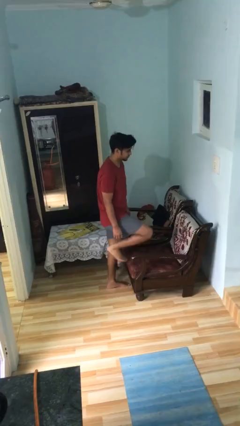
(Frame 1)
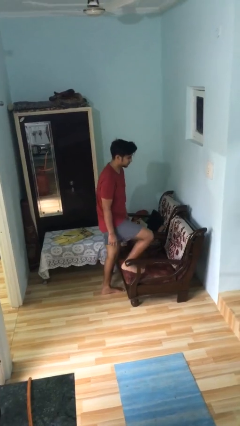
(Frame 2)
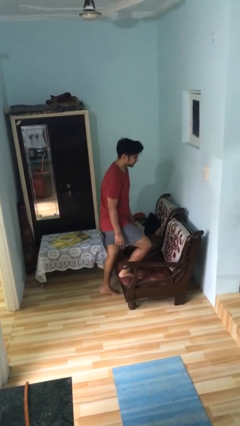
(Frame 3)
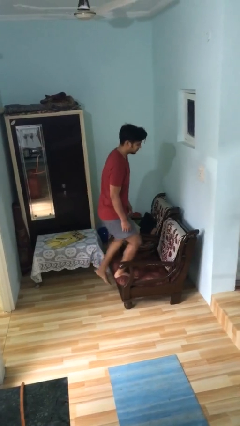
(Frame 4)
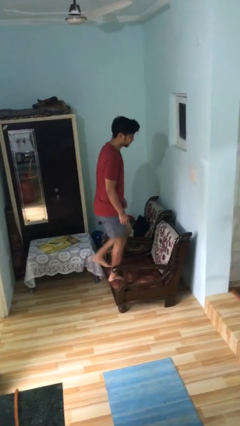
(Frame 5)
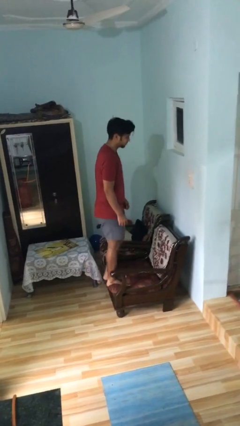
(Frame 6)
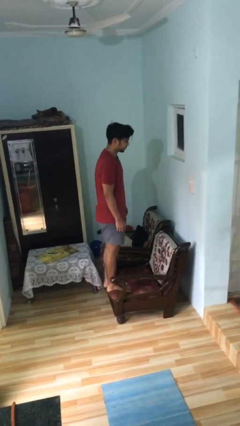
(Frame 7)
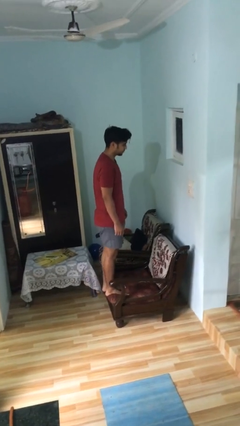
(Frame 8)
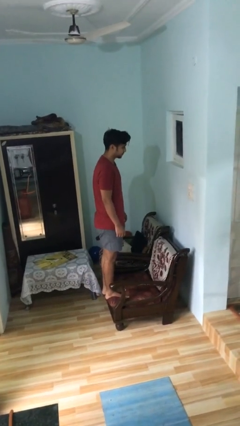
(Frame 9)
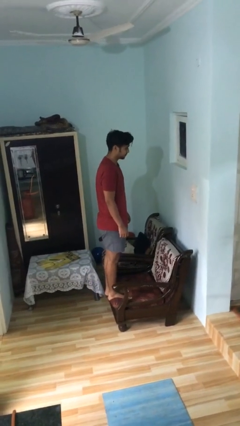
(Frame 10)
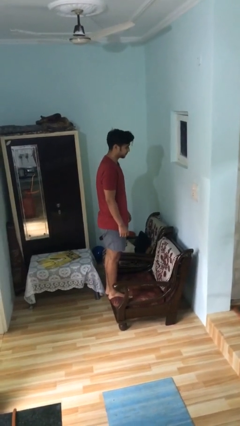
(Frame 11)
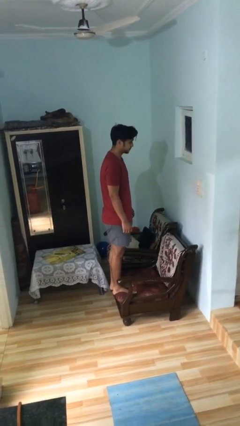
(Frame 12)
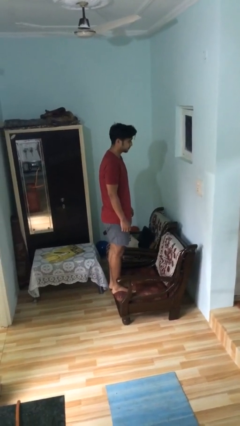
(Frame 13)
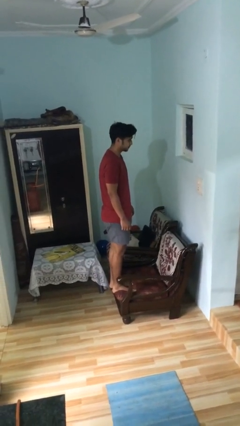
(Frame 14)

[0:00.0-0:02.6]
person climbs on couch

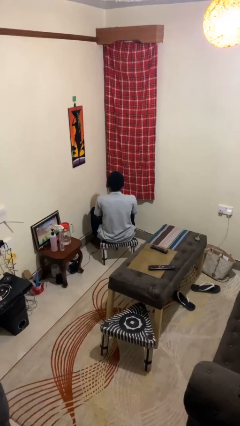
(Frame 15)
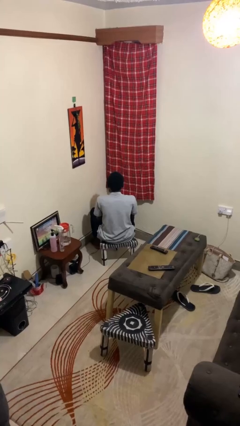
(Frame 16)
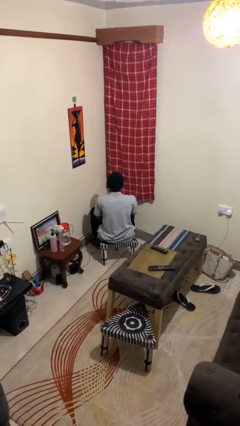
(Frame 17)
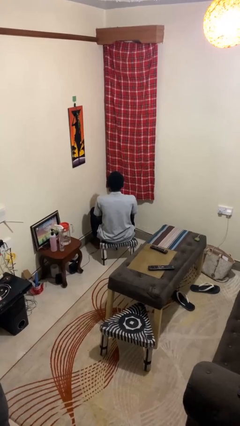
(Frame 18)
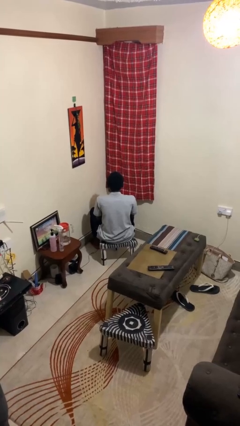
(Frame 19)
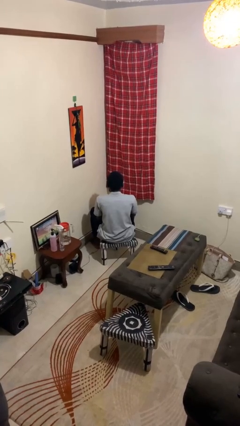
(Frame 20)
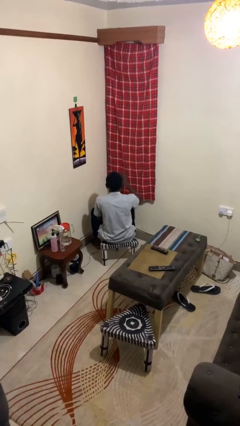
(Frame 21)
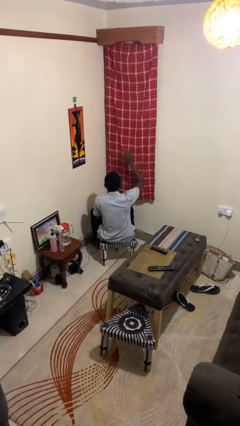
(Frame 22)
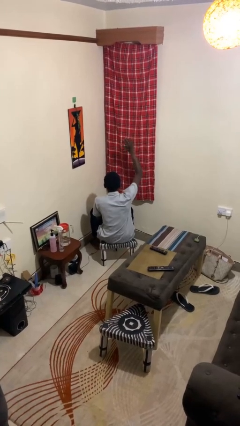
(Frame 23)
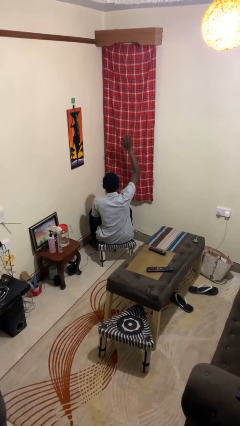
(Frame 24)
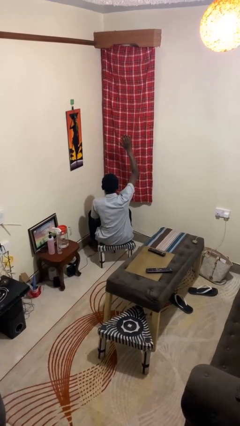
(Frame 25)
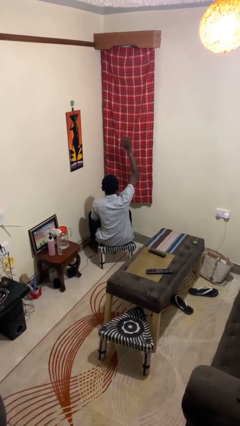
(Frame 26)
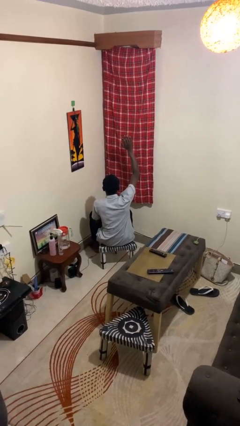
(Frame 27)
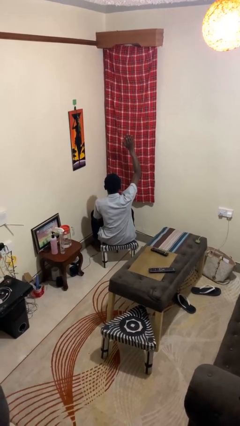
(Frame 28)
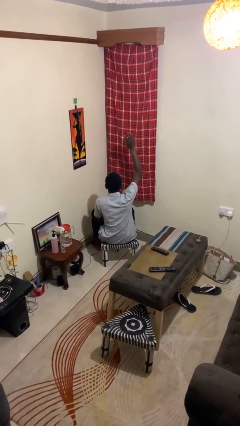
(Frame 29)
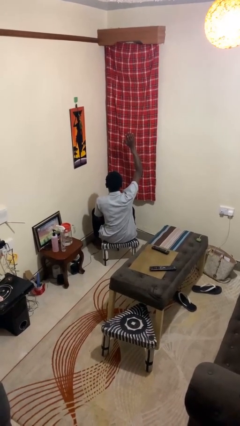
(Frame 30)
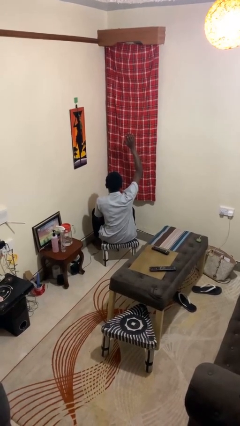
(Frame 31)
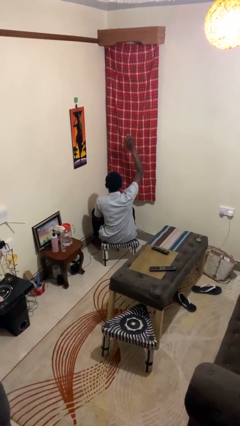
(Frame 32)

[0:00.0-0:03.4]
person gestures raise hand

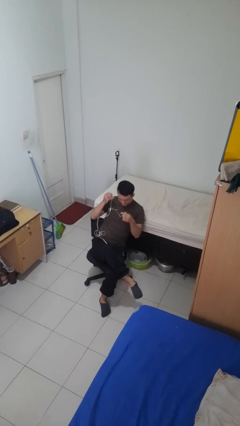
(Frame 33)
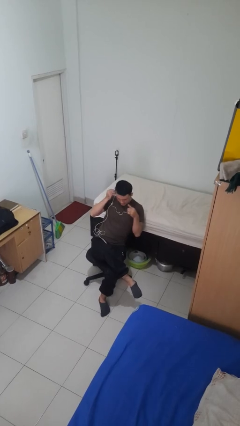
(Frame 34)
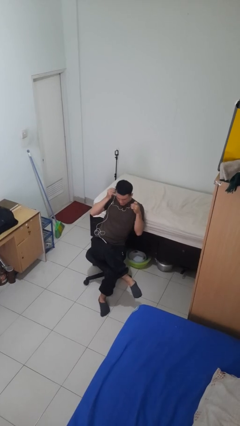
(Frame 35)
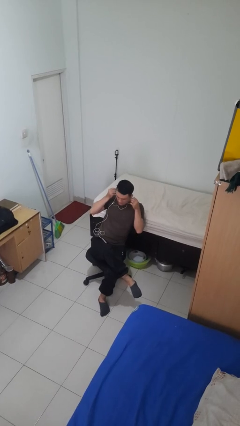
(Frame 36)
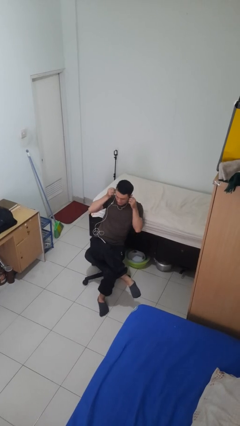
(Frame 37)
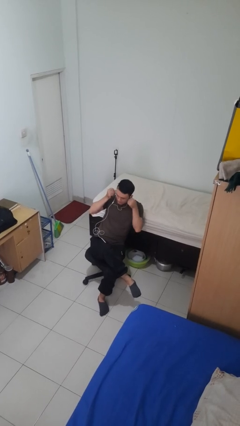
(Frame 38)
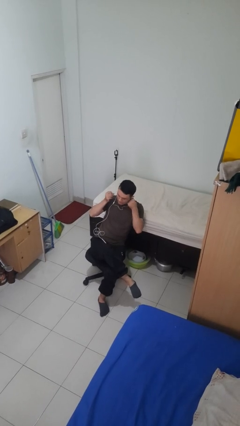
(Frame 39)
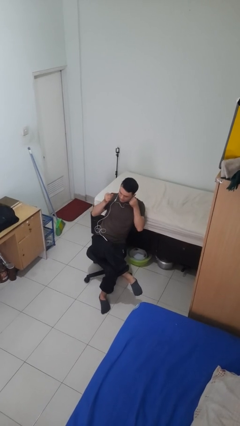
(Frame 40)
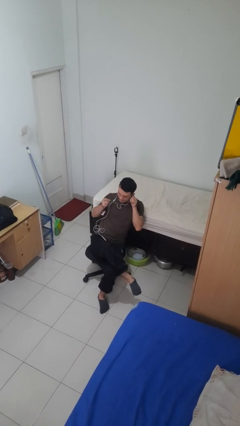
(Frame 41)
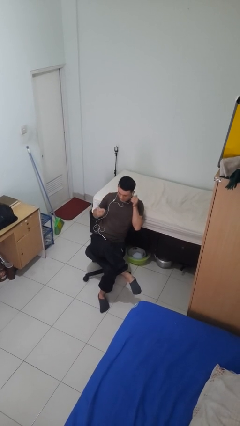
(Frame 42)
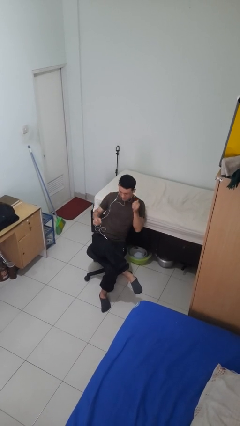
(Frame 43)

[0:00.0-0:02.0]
person puts on headphones

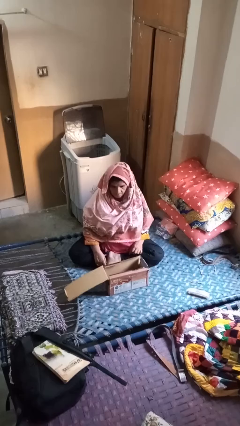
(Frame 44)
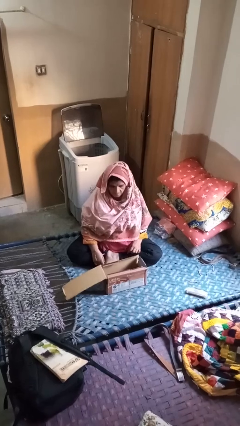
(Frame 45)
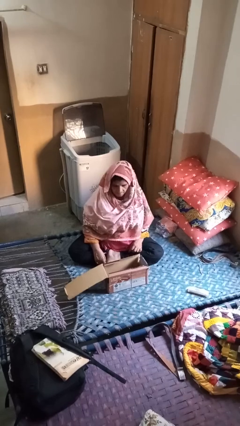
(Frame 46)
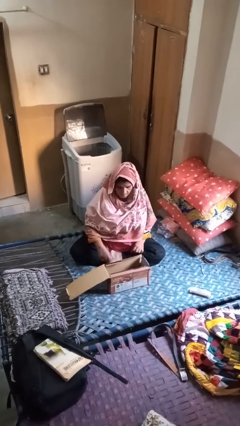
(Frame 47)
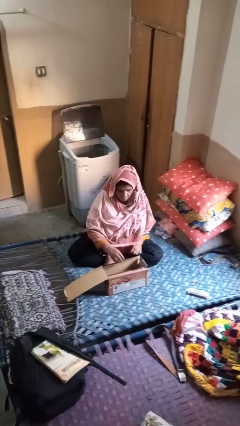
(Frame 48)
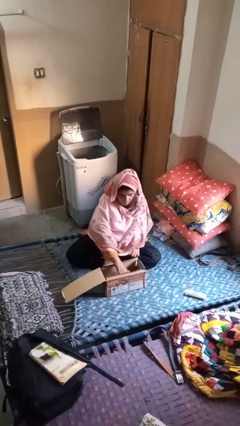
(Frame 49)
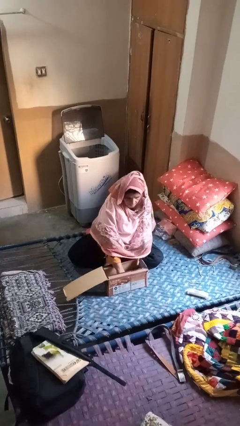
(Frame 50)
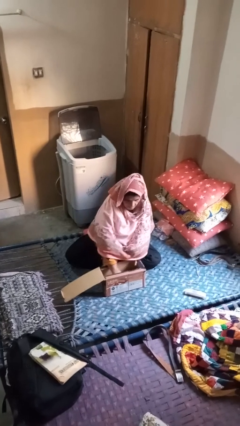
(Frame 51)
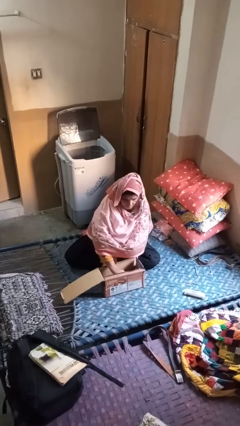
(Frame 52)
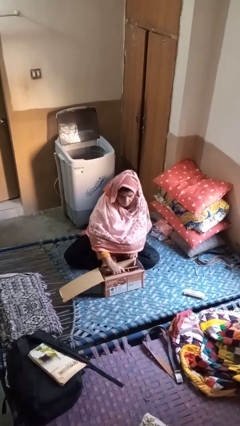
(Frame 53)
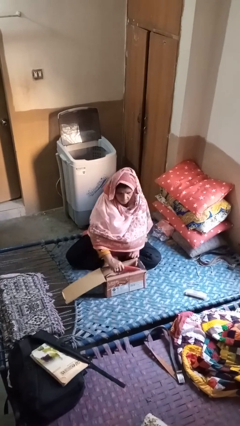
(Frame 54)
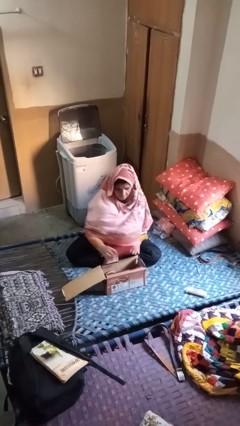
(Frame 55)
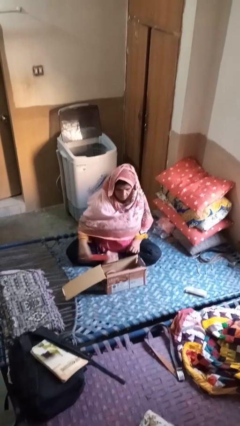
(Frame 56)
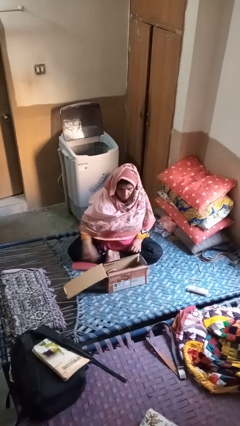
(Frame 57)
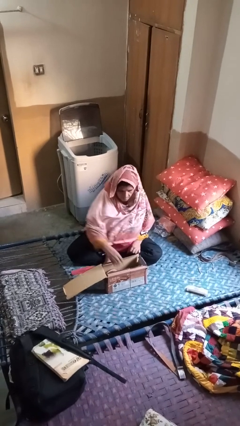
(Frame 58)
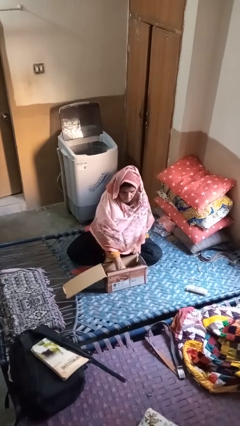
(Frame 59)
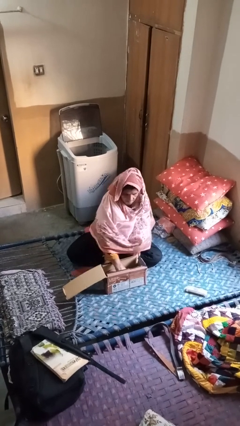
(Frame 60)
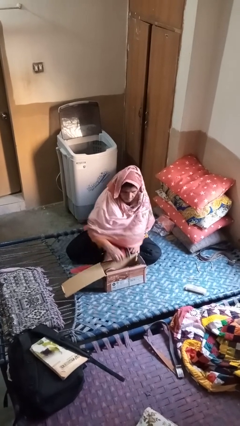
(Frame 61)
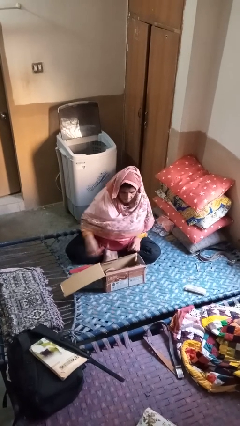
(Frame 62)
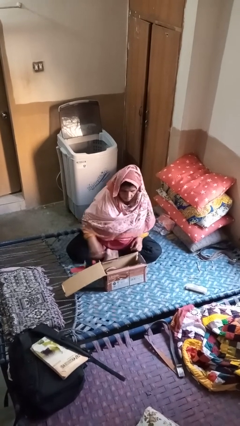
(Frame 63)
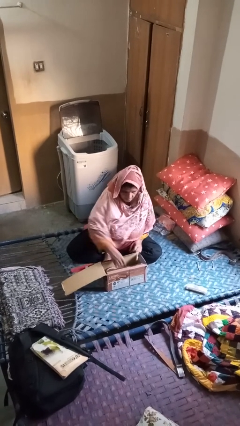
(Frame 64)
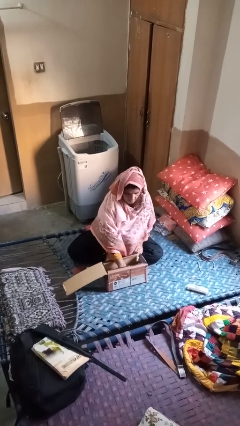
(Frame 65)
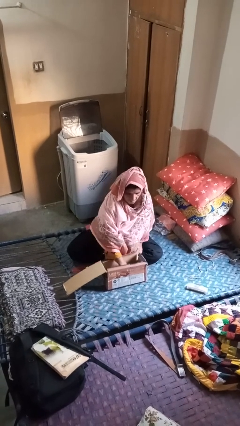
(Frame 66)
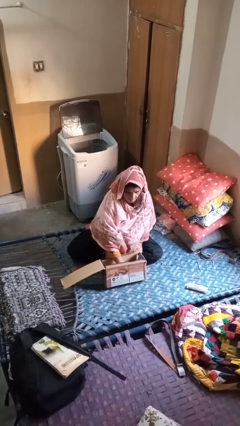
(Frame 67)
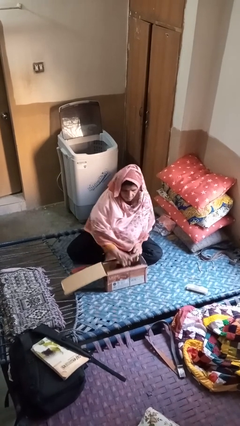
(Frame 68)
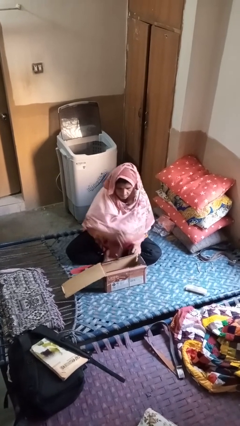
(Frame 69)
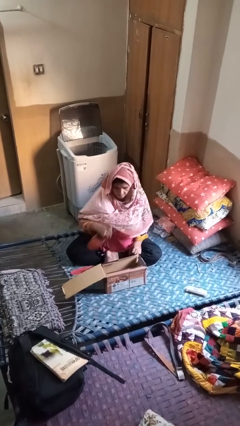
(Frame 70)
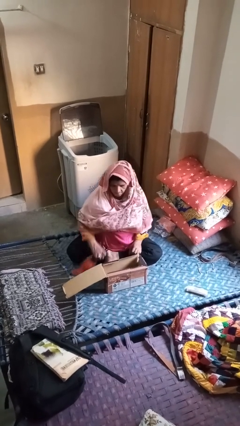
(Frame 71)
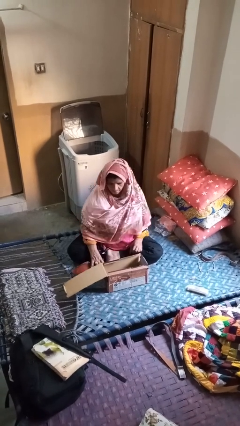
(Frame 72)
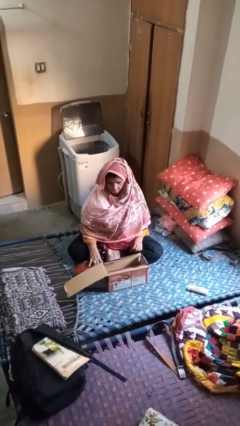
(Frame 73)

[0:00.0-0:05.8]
person takes object from box

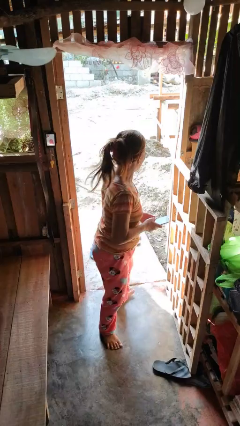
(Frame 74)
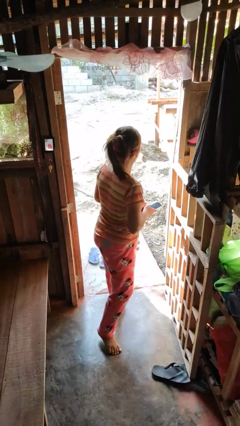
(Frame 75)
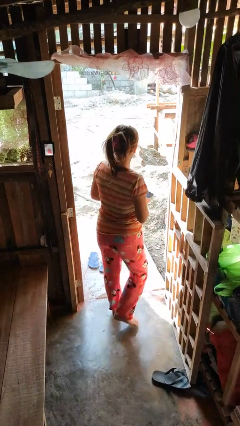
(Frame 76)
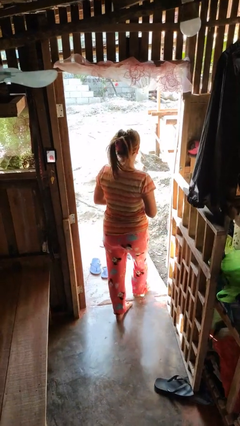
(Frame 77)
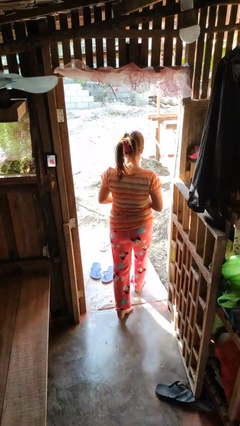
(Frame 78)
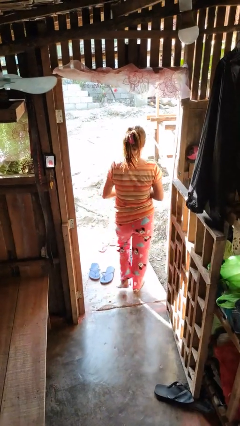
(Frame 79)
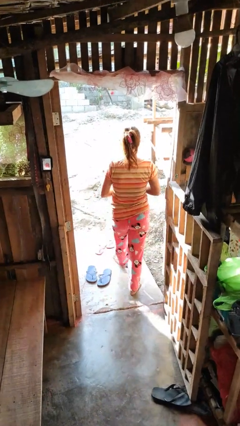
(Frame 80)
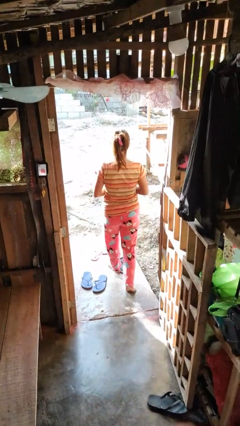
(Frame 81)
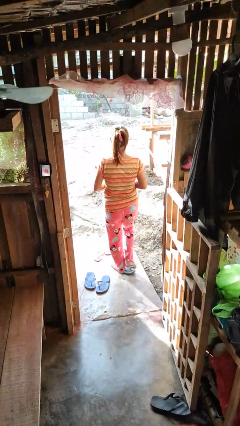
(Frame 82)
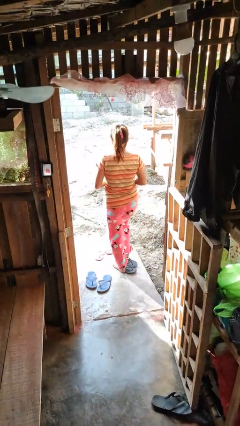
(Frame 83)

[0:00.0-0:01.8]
person exits scene through structure

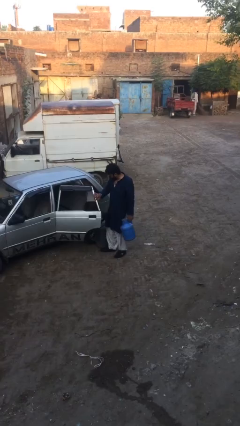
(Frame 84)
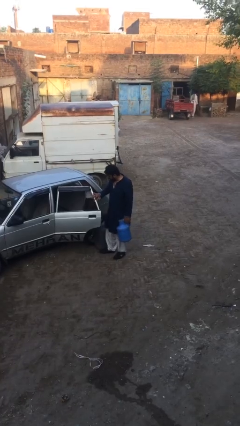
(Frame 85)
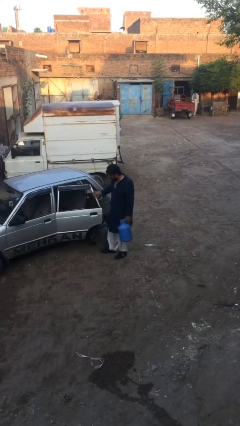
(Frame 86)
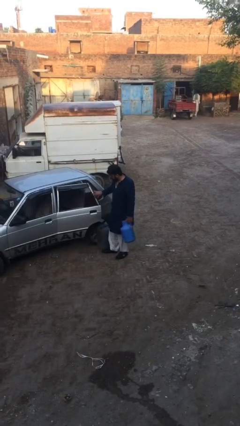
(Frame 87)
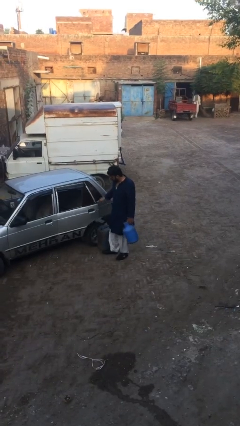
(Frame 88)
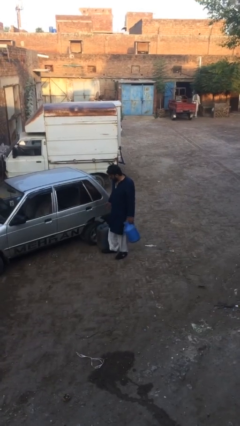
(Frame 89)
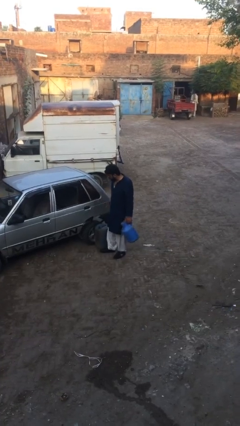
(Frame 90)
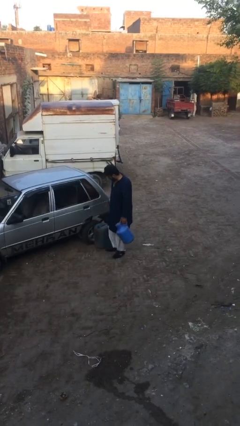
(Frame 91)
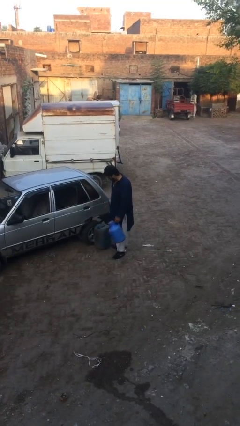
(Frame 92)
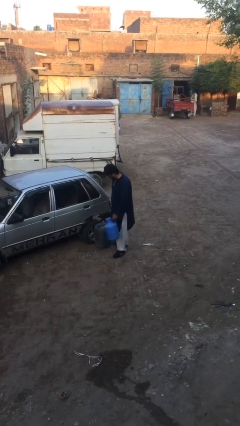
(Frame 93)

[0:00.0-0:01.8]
person closes car door
